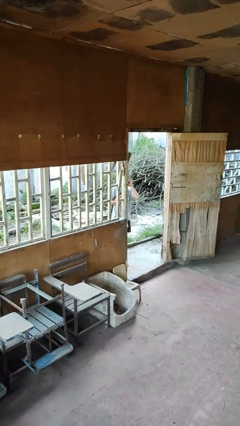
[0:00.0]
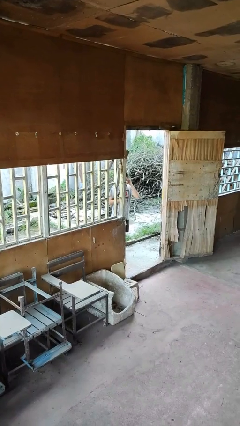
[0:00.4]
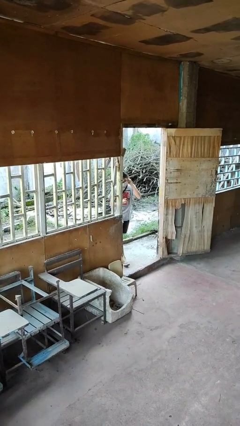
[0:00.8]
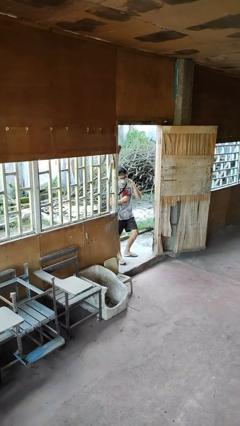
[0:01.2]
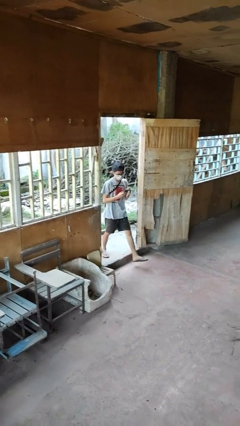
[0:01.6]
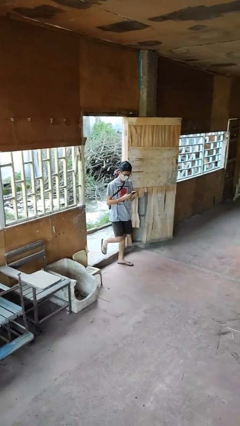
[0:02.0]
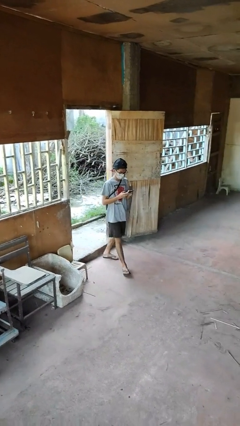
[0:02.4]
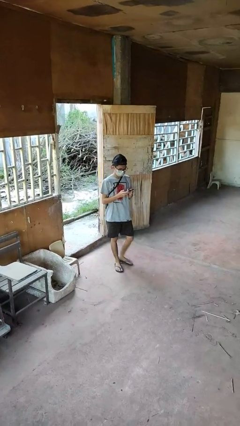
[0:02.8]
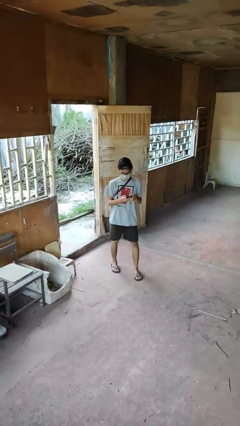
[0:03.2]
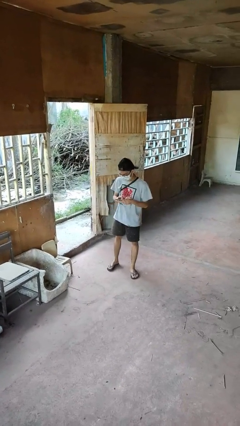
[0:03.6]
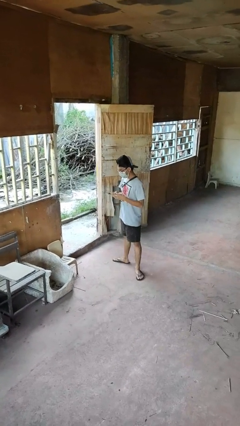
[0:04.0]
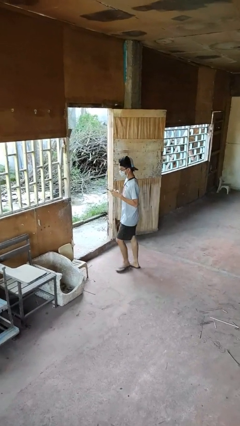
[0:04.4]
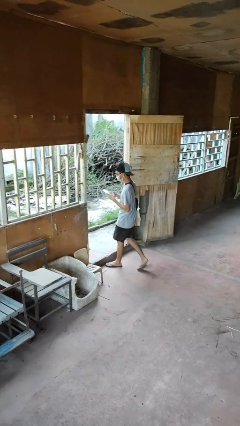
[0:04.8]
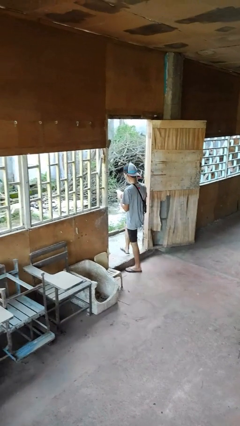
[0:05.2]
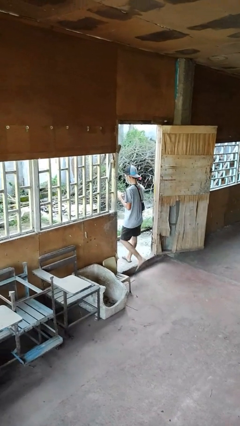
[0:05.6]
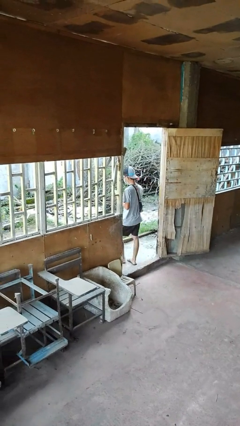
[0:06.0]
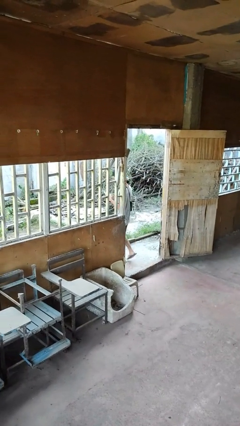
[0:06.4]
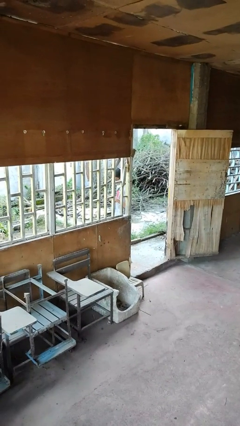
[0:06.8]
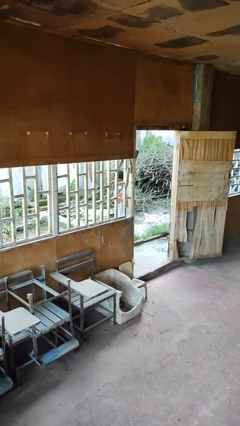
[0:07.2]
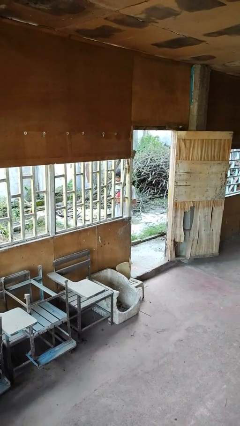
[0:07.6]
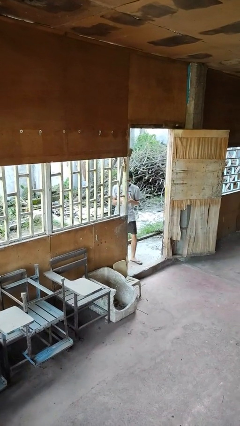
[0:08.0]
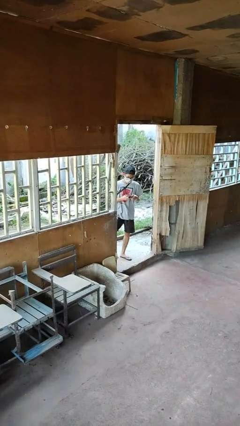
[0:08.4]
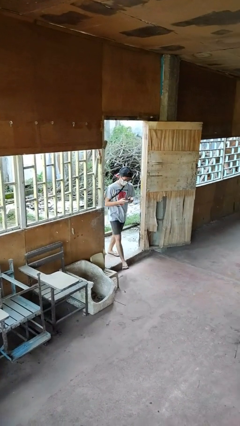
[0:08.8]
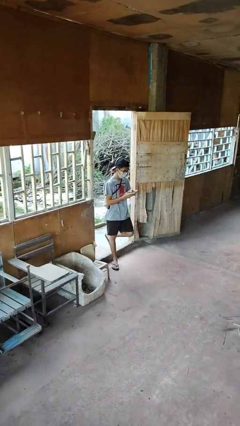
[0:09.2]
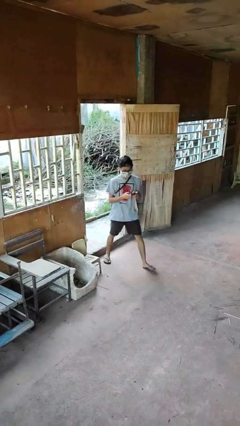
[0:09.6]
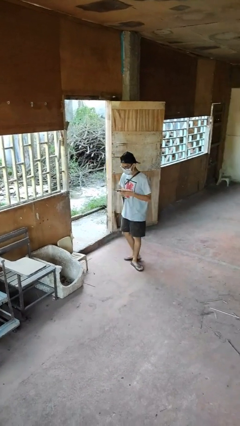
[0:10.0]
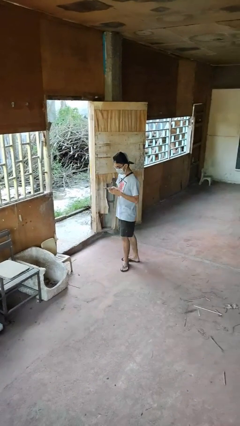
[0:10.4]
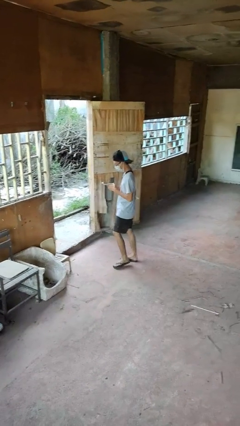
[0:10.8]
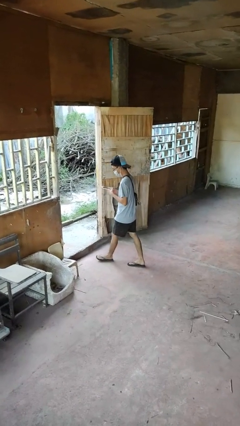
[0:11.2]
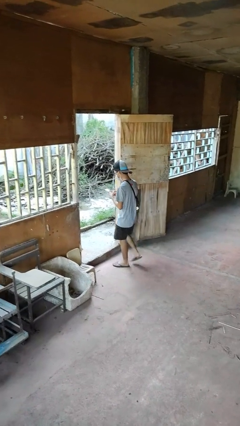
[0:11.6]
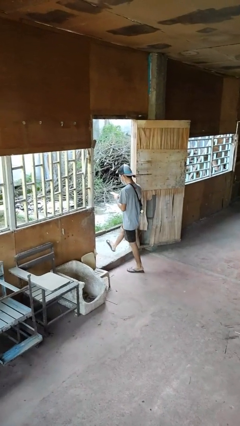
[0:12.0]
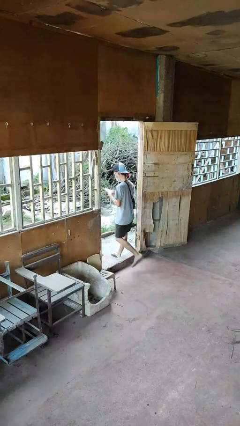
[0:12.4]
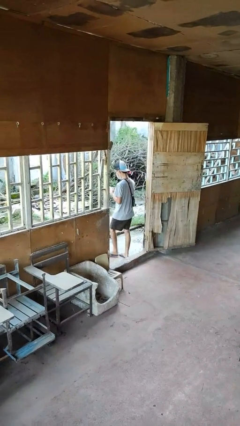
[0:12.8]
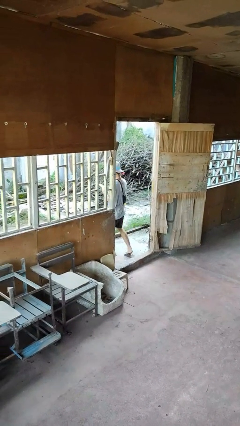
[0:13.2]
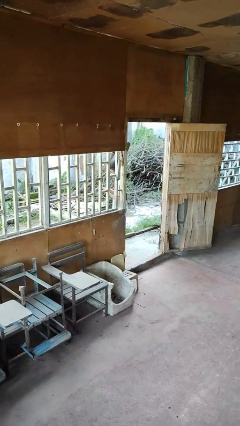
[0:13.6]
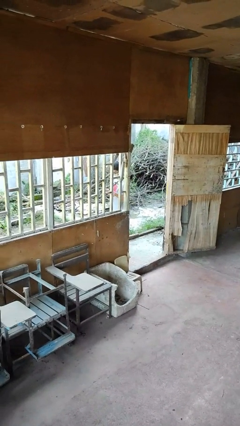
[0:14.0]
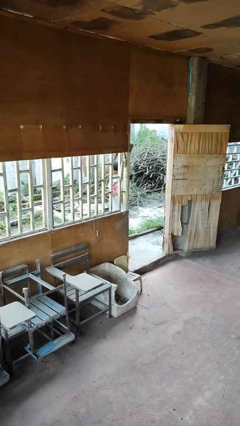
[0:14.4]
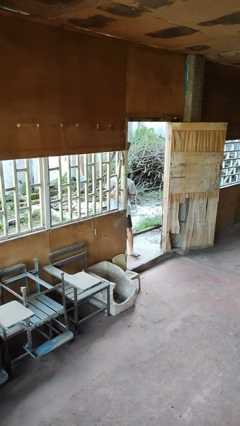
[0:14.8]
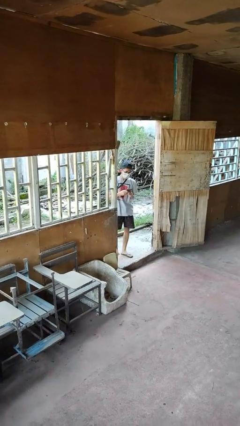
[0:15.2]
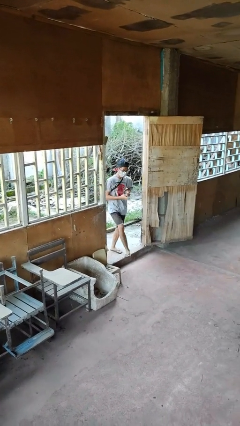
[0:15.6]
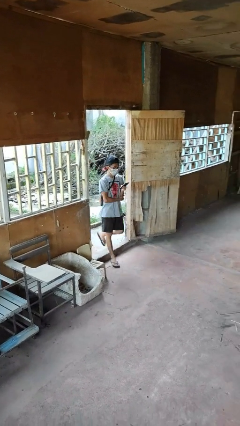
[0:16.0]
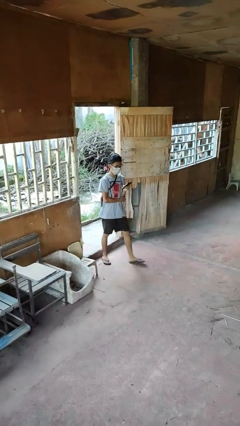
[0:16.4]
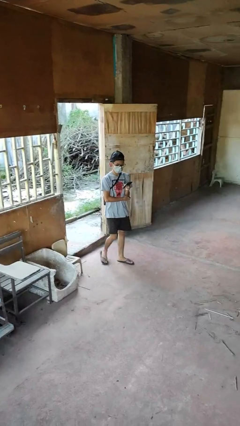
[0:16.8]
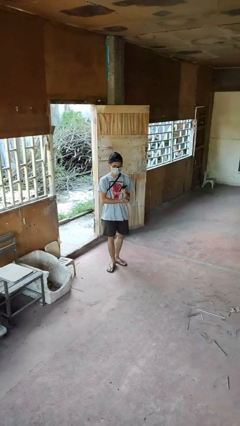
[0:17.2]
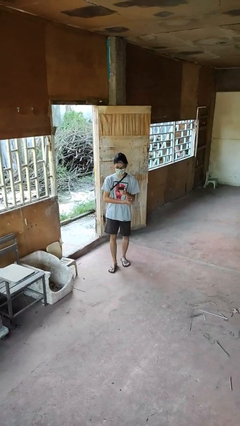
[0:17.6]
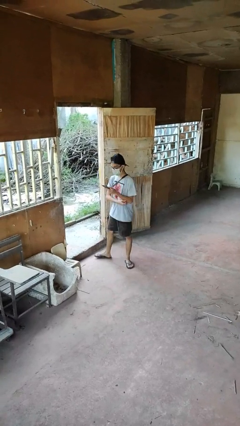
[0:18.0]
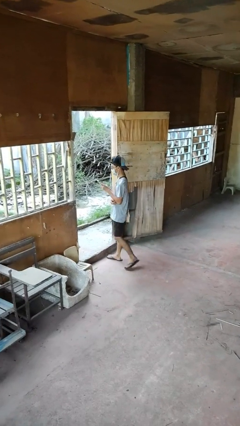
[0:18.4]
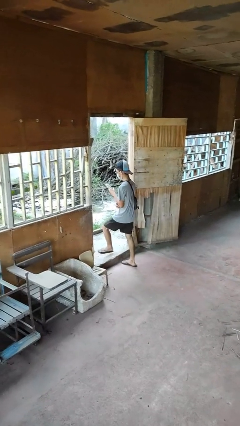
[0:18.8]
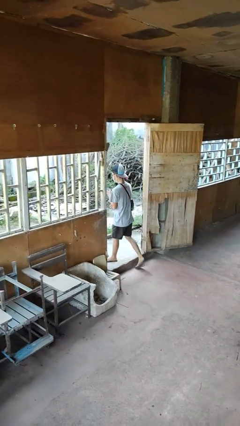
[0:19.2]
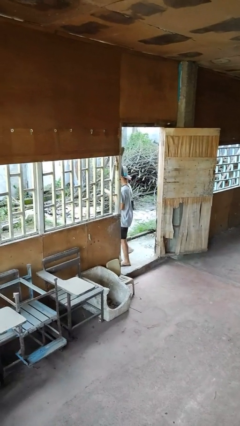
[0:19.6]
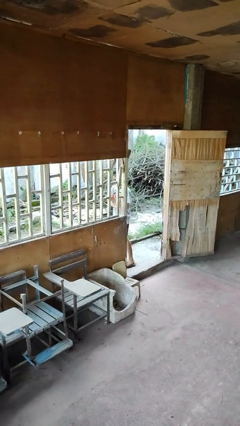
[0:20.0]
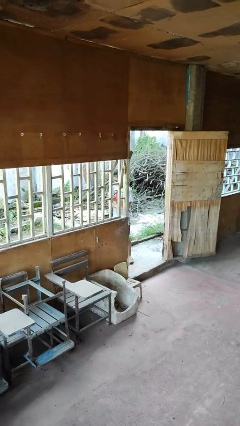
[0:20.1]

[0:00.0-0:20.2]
person texts on phone

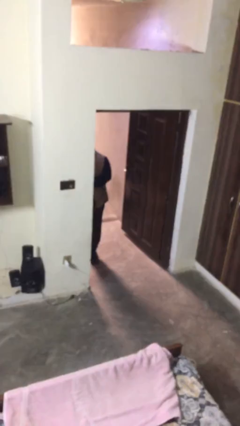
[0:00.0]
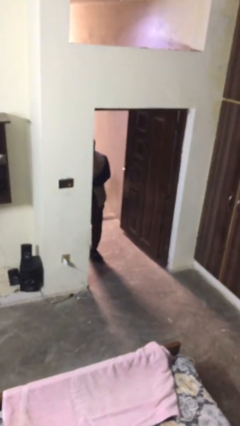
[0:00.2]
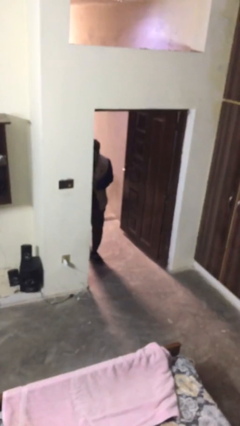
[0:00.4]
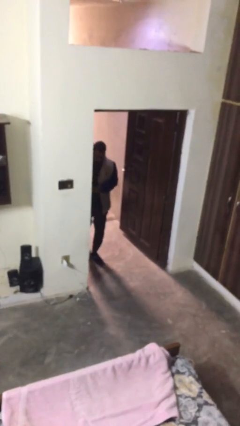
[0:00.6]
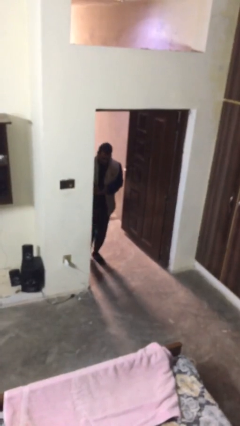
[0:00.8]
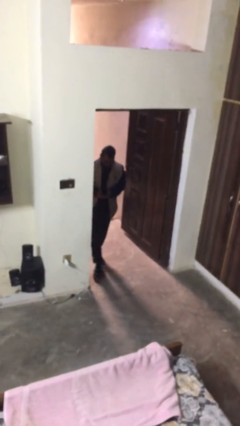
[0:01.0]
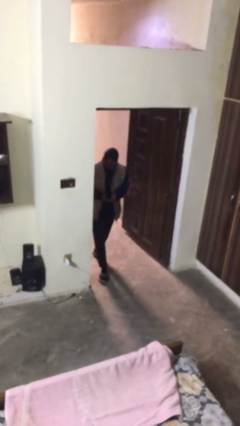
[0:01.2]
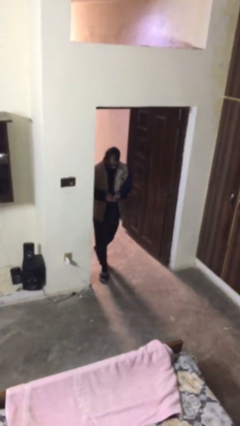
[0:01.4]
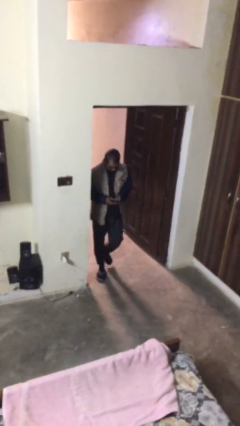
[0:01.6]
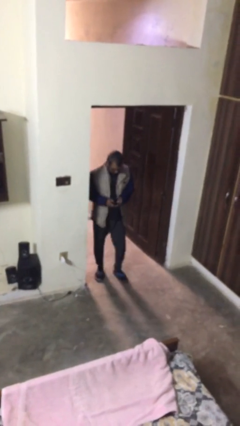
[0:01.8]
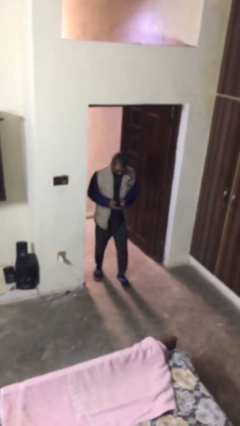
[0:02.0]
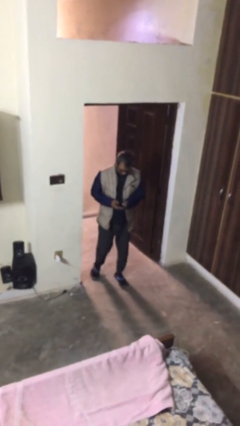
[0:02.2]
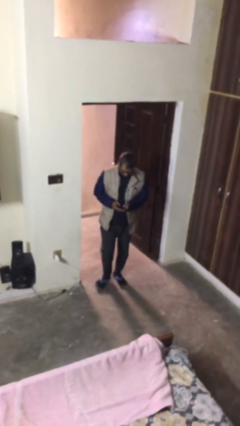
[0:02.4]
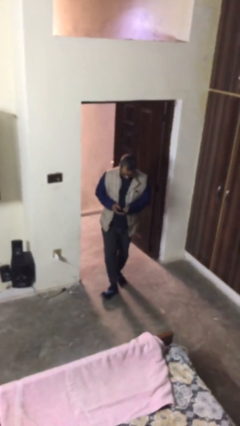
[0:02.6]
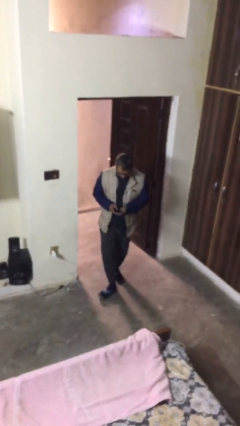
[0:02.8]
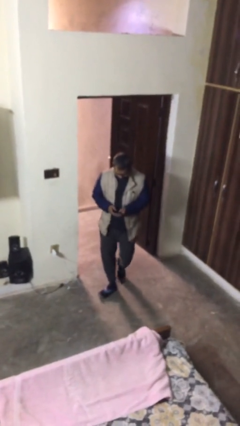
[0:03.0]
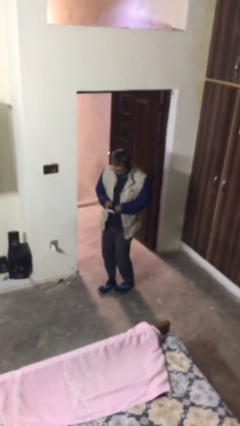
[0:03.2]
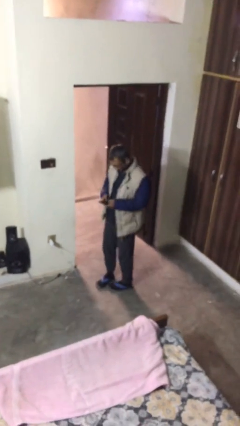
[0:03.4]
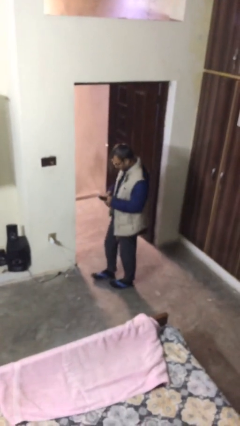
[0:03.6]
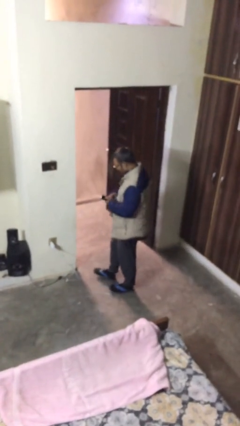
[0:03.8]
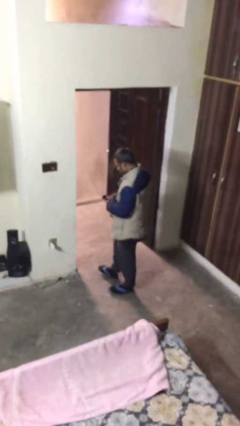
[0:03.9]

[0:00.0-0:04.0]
person enters scene through structure

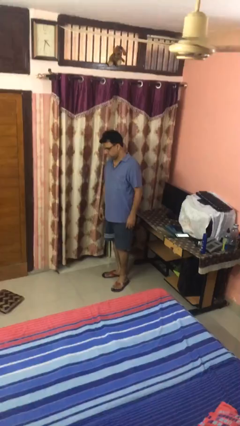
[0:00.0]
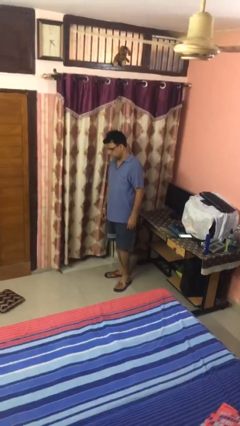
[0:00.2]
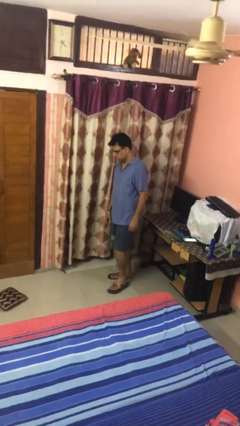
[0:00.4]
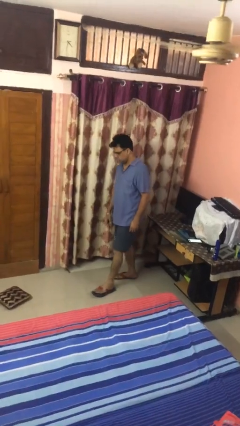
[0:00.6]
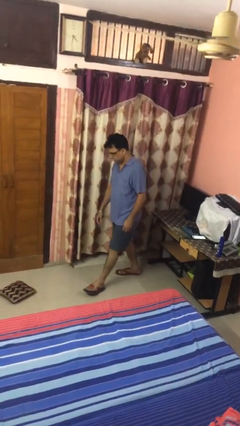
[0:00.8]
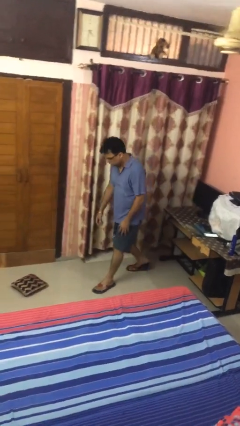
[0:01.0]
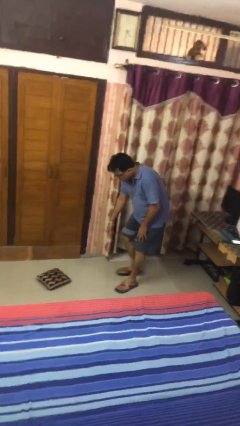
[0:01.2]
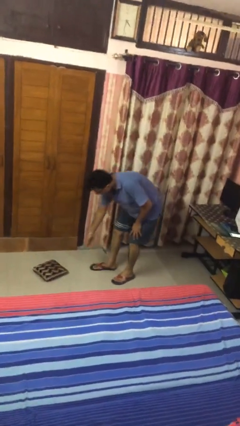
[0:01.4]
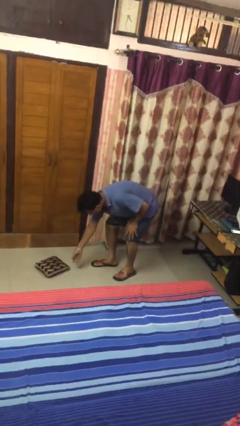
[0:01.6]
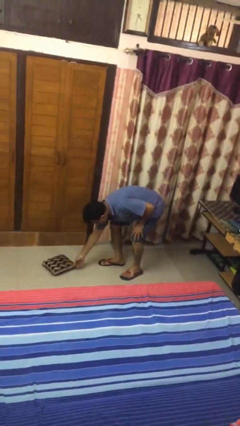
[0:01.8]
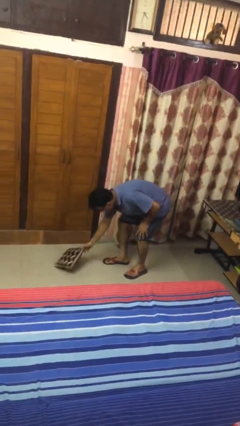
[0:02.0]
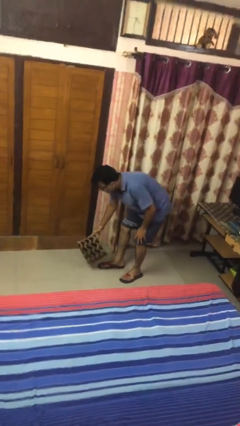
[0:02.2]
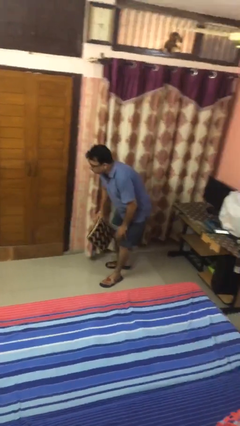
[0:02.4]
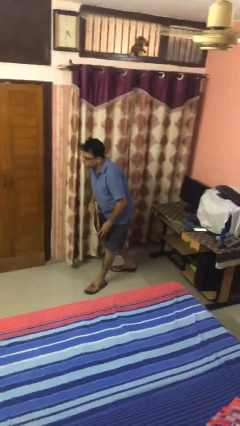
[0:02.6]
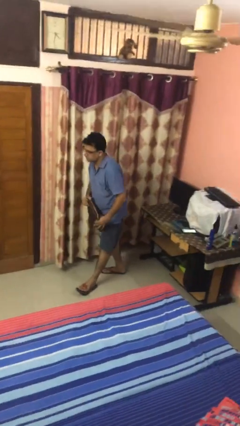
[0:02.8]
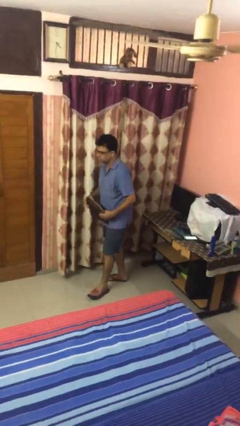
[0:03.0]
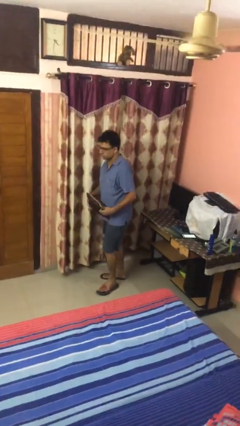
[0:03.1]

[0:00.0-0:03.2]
person picks up object from floor

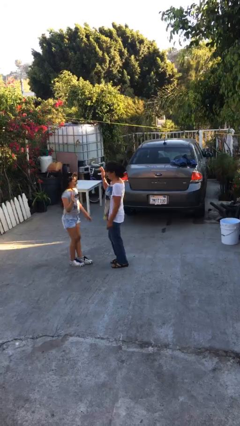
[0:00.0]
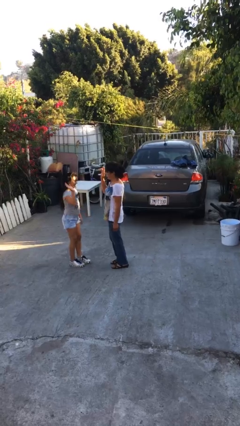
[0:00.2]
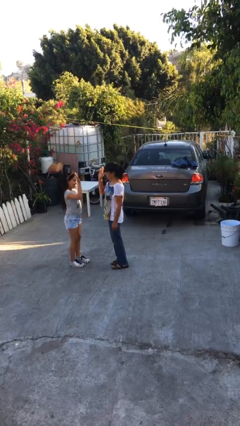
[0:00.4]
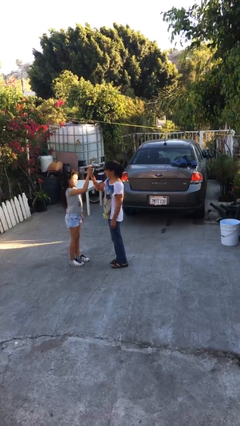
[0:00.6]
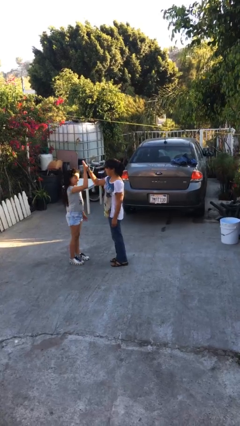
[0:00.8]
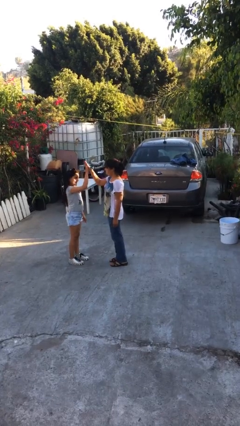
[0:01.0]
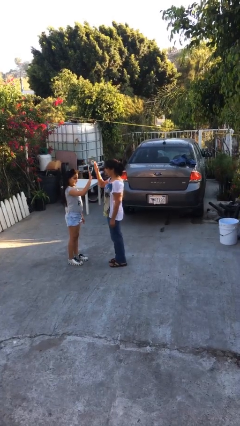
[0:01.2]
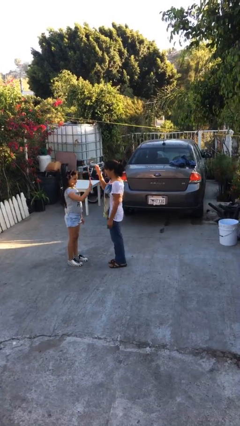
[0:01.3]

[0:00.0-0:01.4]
person highfives hand
